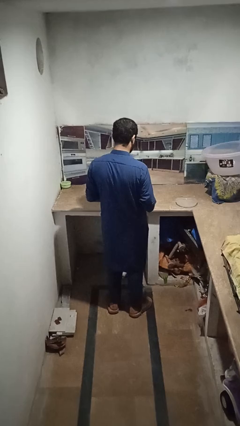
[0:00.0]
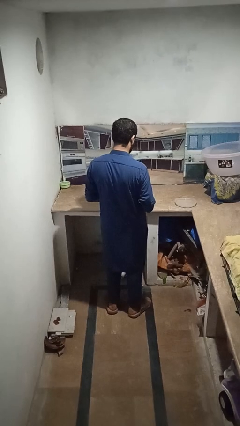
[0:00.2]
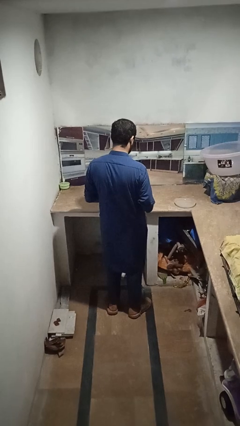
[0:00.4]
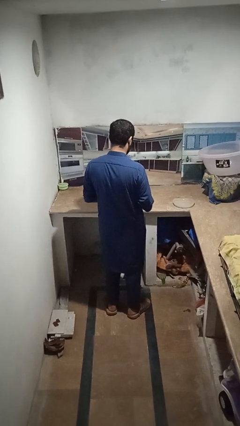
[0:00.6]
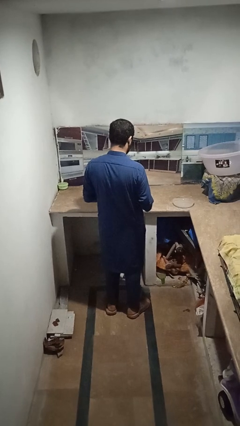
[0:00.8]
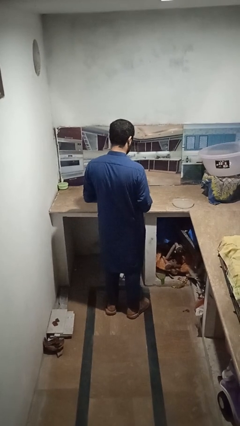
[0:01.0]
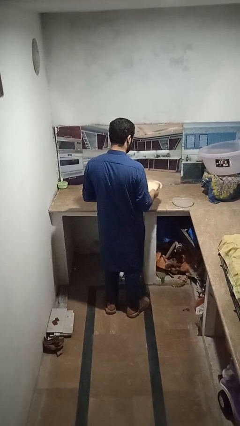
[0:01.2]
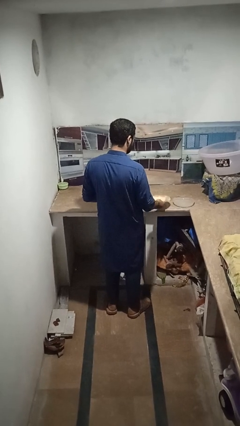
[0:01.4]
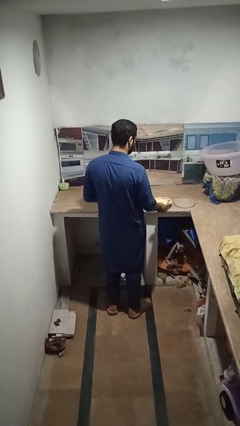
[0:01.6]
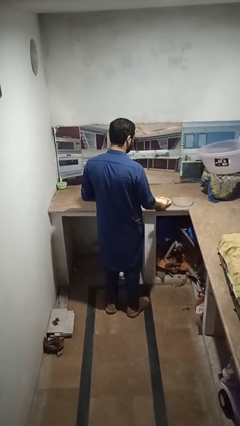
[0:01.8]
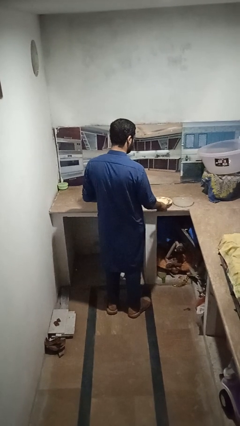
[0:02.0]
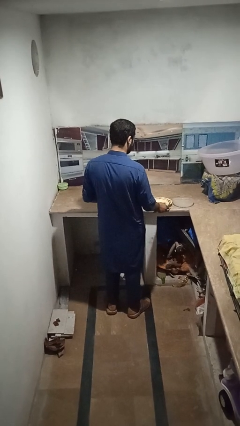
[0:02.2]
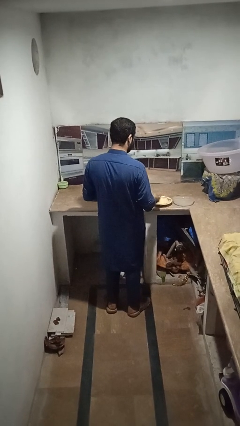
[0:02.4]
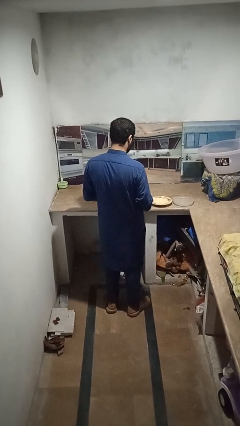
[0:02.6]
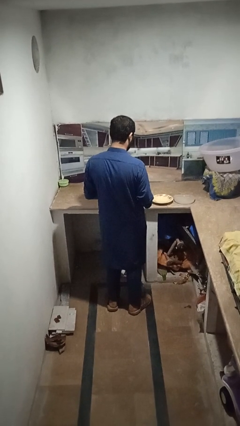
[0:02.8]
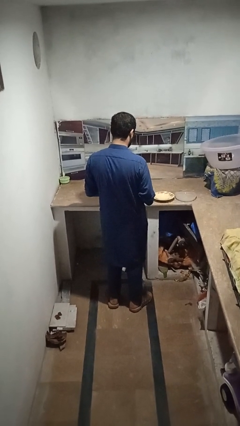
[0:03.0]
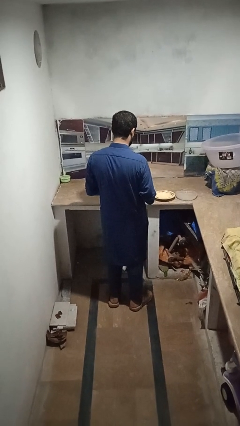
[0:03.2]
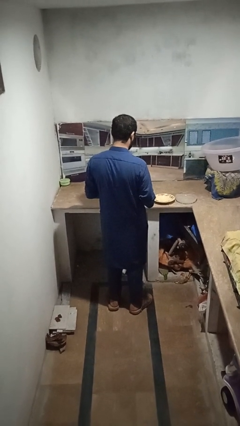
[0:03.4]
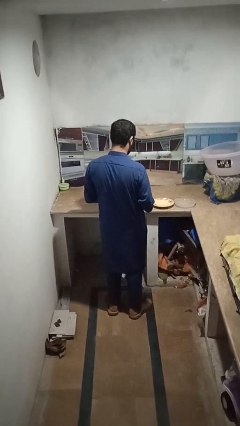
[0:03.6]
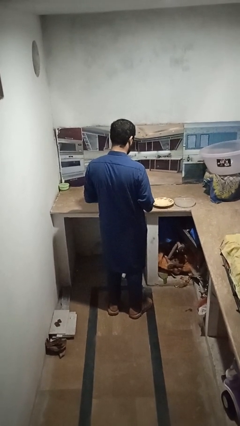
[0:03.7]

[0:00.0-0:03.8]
person sets table

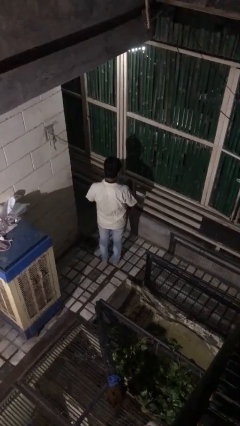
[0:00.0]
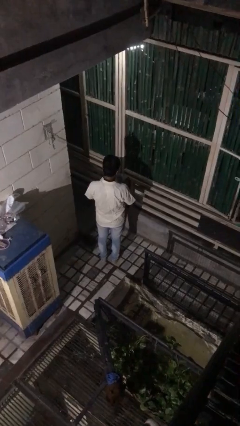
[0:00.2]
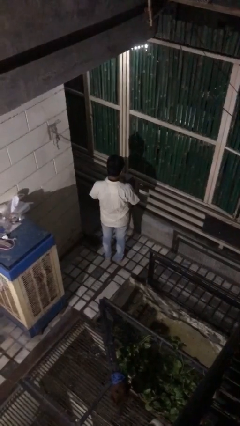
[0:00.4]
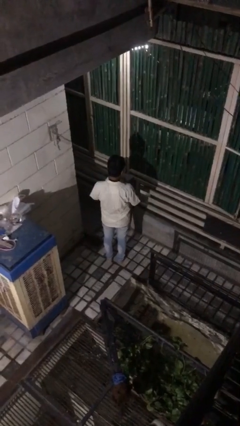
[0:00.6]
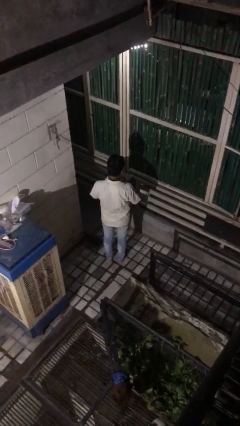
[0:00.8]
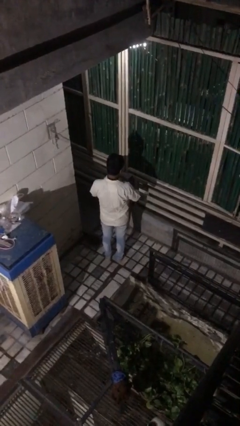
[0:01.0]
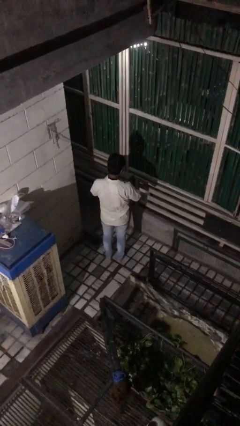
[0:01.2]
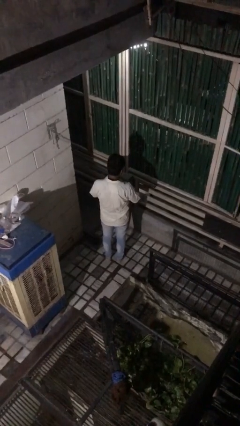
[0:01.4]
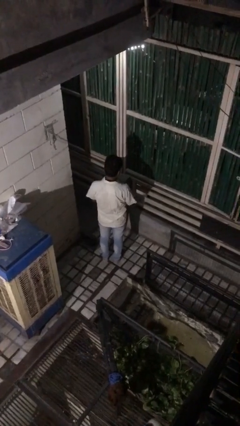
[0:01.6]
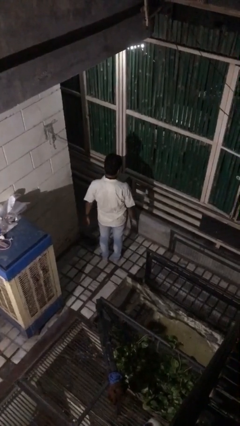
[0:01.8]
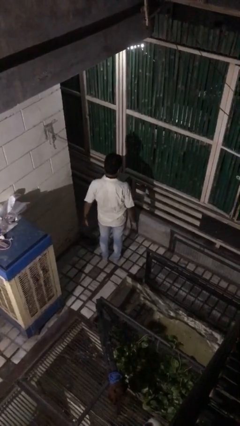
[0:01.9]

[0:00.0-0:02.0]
person puts on ring

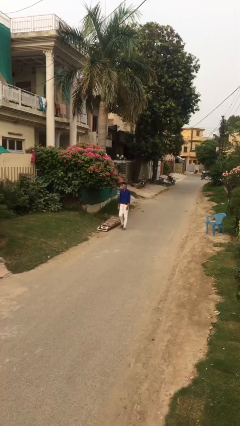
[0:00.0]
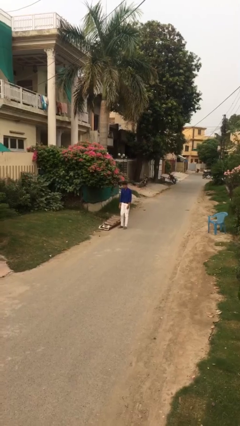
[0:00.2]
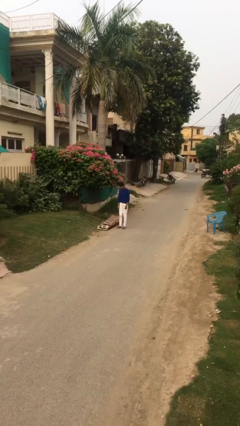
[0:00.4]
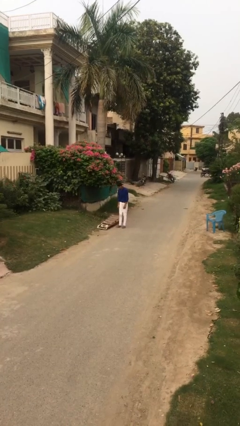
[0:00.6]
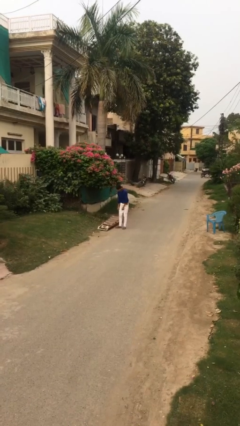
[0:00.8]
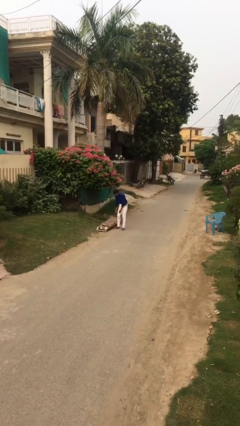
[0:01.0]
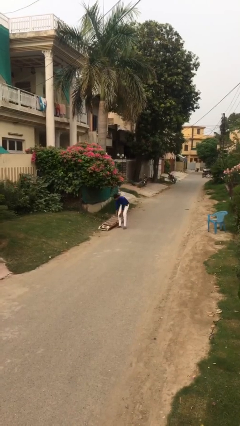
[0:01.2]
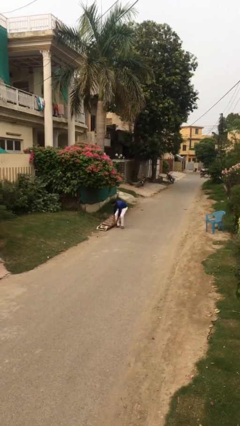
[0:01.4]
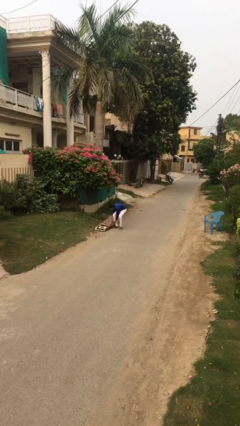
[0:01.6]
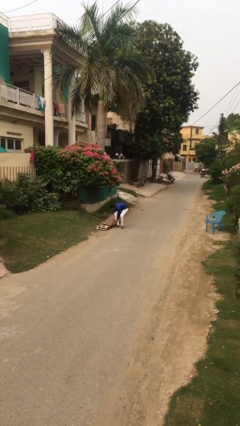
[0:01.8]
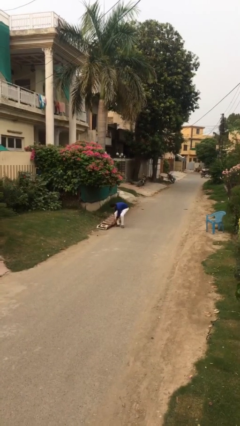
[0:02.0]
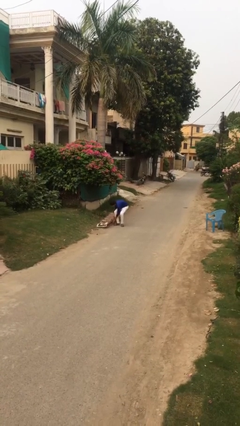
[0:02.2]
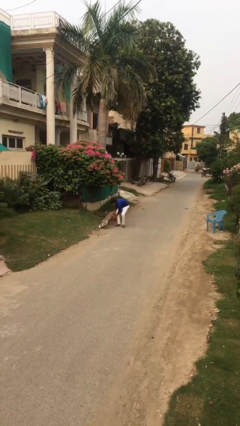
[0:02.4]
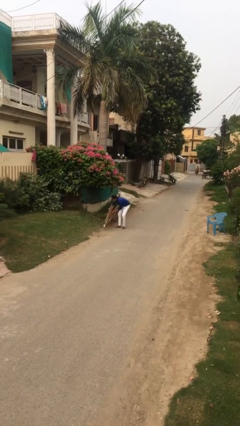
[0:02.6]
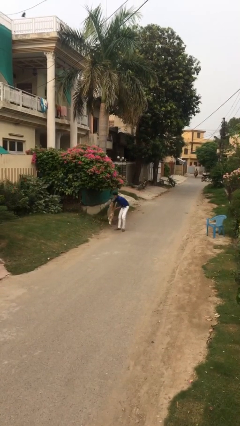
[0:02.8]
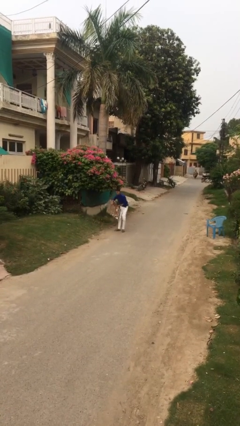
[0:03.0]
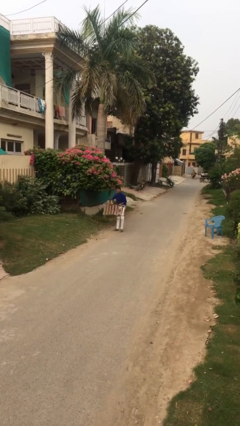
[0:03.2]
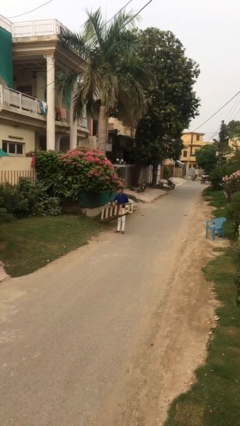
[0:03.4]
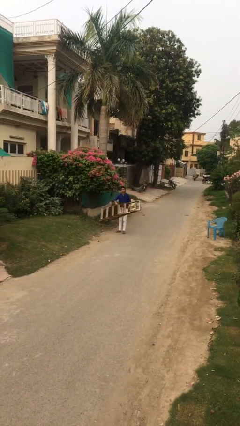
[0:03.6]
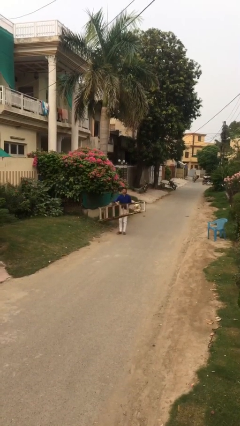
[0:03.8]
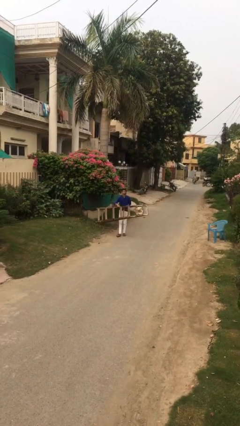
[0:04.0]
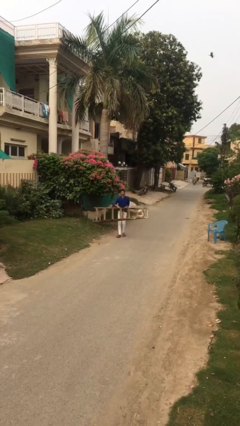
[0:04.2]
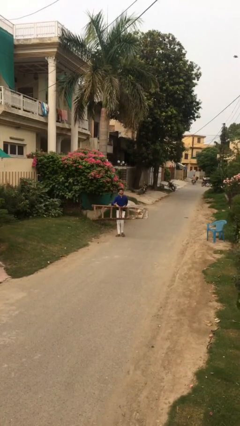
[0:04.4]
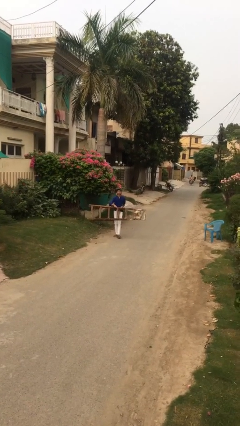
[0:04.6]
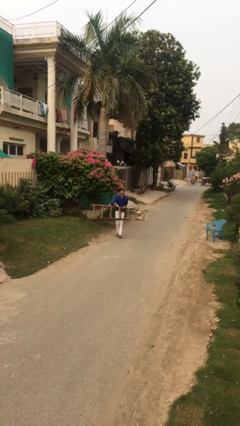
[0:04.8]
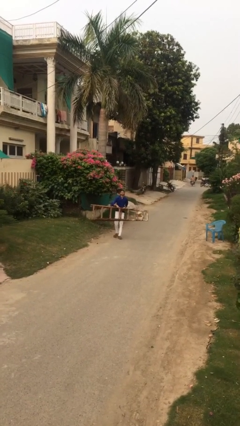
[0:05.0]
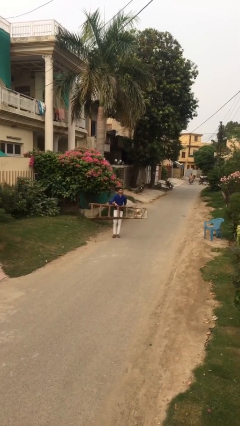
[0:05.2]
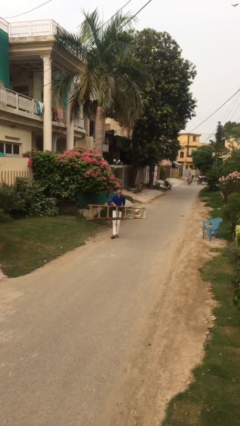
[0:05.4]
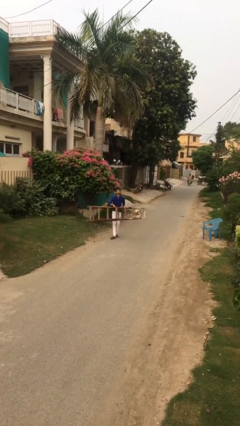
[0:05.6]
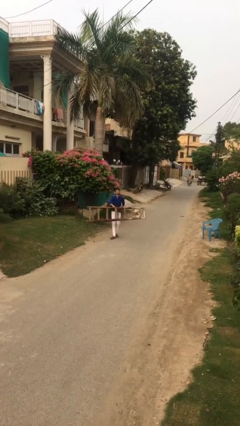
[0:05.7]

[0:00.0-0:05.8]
person carries heavy object

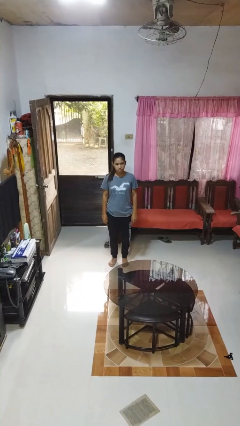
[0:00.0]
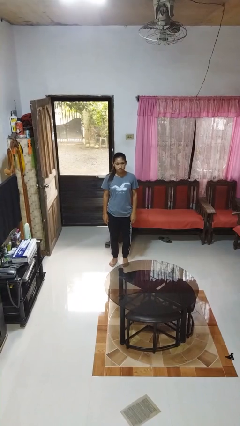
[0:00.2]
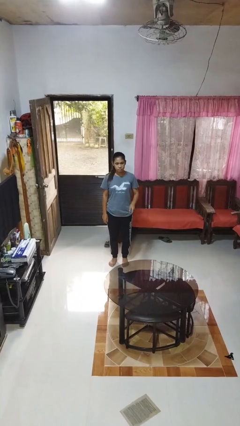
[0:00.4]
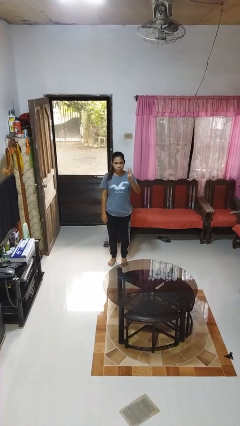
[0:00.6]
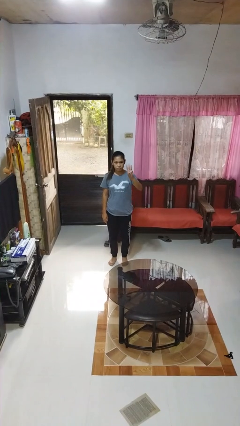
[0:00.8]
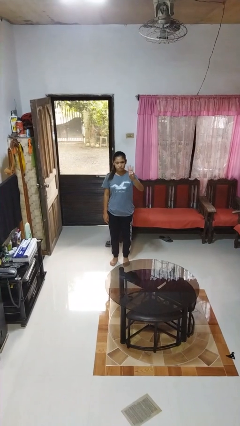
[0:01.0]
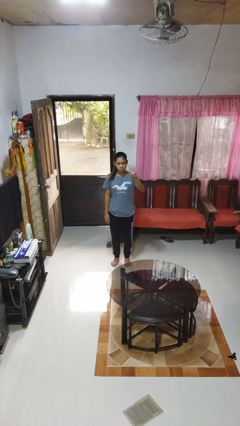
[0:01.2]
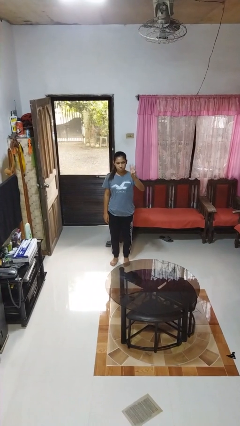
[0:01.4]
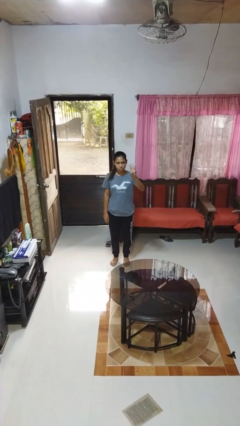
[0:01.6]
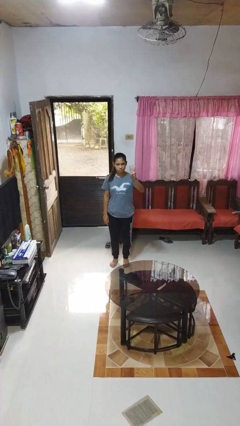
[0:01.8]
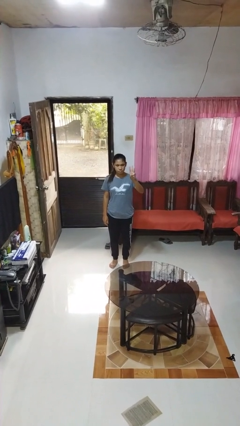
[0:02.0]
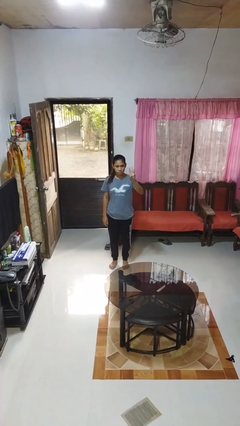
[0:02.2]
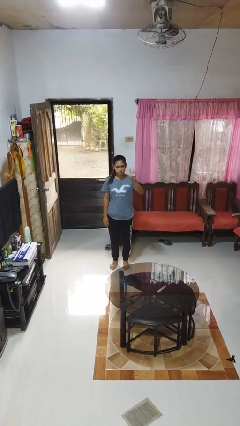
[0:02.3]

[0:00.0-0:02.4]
person gestures number three

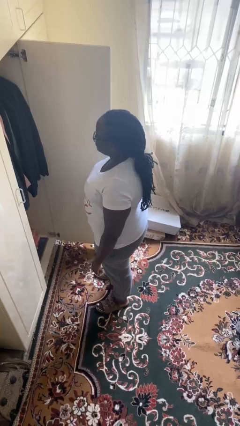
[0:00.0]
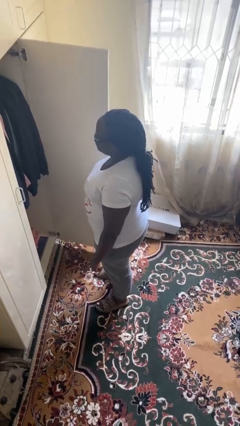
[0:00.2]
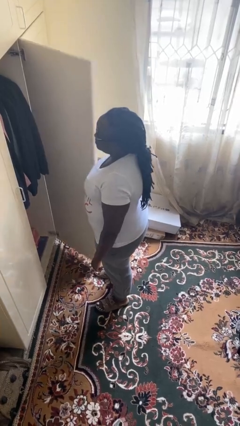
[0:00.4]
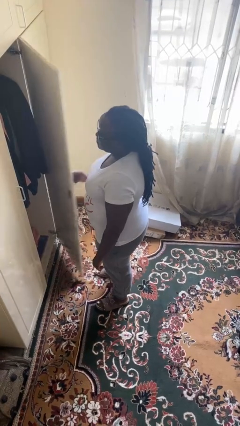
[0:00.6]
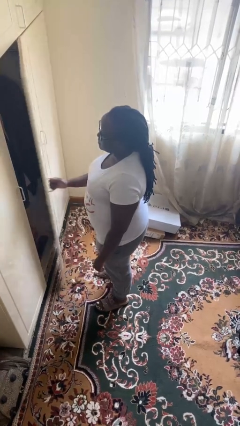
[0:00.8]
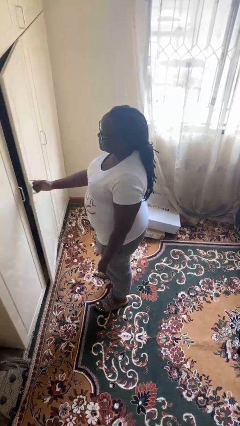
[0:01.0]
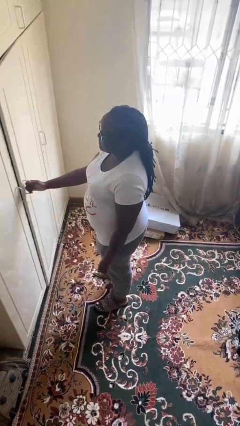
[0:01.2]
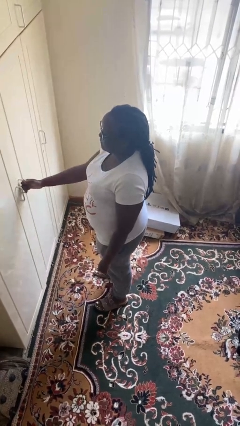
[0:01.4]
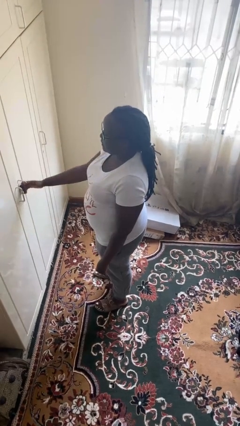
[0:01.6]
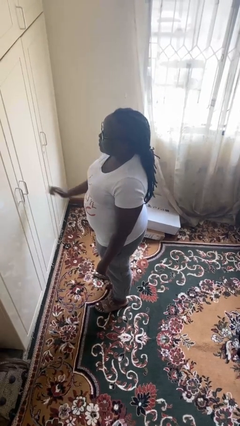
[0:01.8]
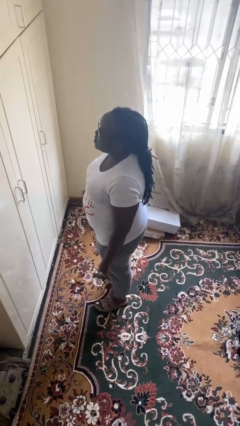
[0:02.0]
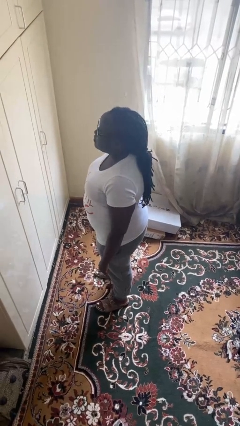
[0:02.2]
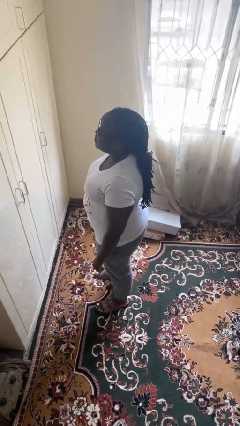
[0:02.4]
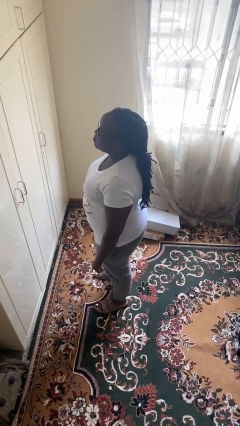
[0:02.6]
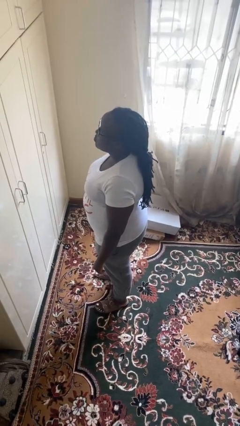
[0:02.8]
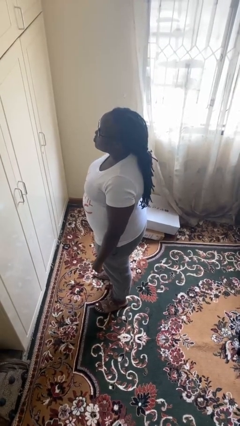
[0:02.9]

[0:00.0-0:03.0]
person closes closet door

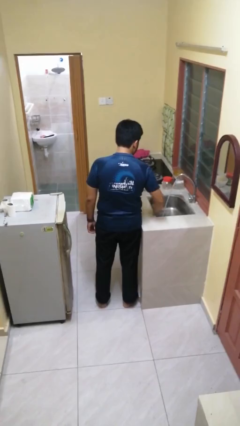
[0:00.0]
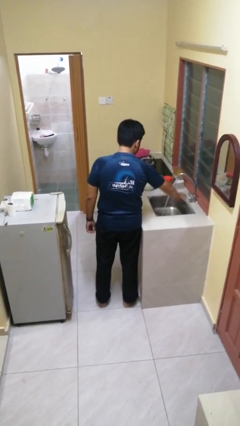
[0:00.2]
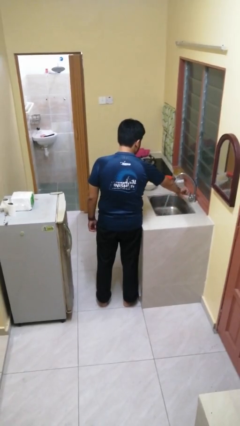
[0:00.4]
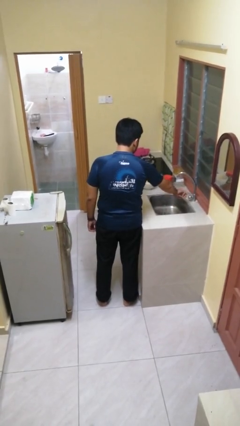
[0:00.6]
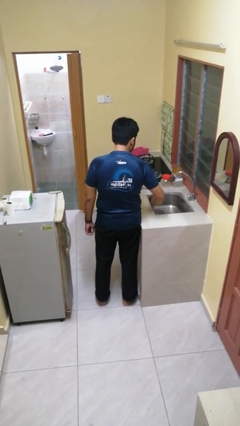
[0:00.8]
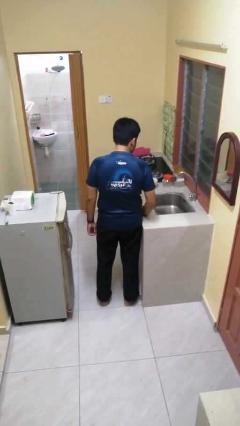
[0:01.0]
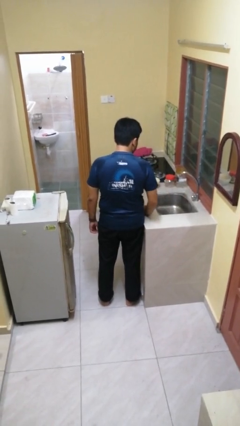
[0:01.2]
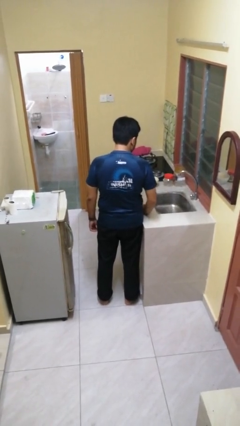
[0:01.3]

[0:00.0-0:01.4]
person turns off faucet
